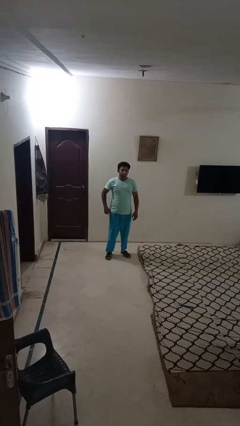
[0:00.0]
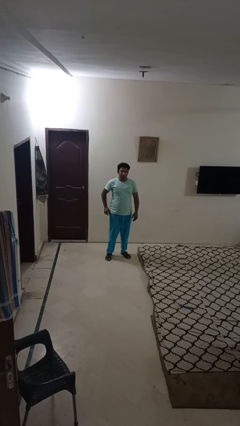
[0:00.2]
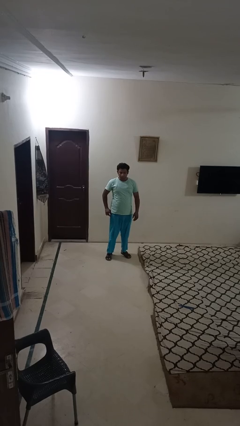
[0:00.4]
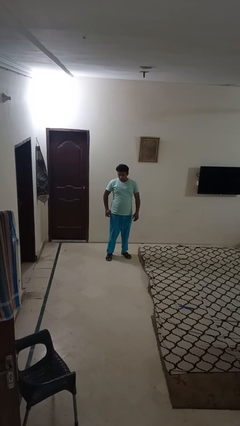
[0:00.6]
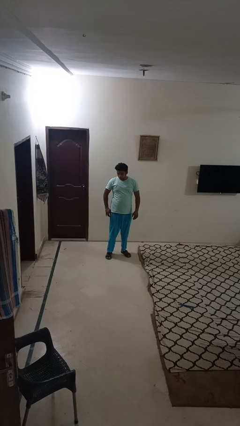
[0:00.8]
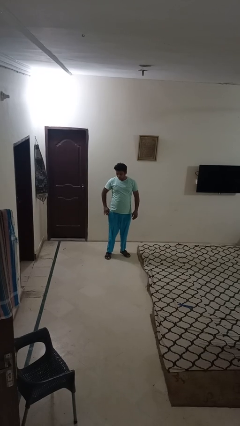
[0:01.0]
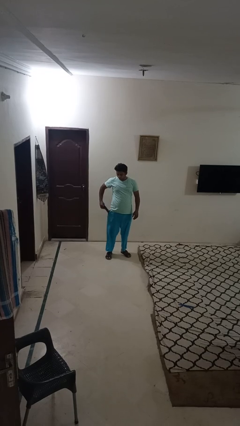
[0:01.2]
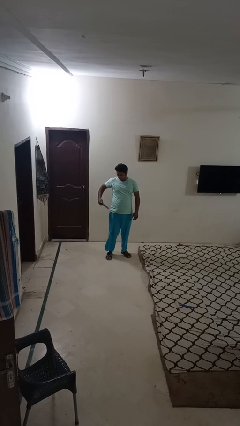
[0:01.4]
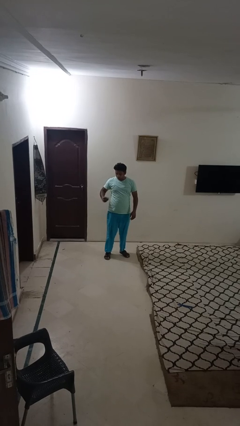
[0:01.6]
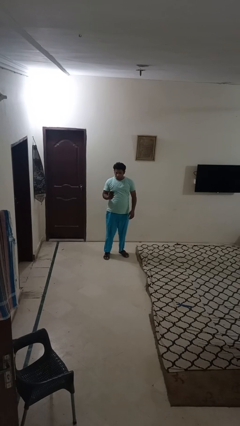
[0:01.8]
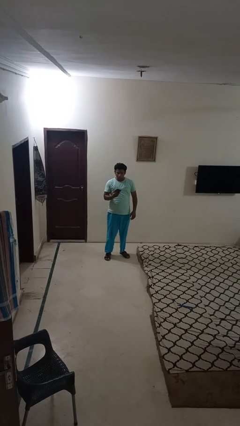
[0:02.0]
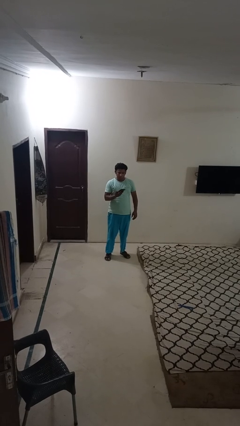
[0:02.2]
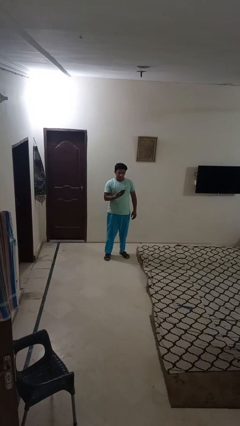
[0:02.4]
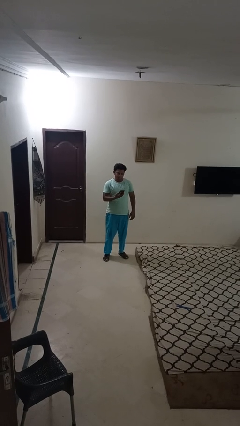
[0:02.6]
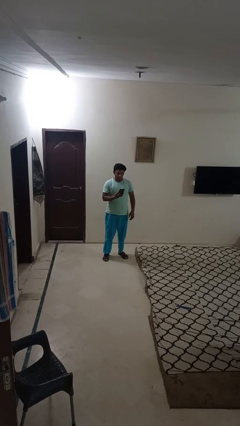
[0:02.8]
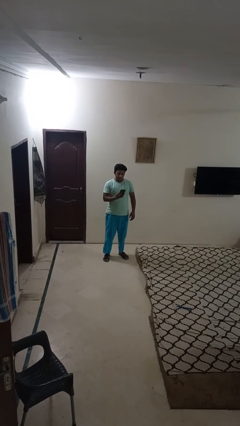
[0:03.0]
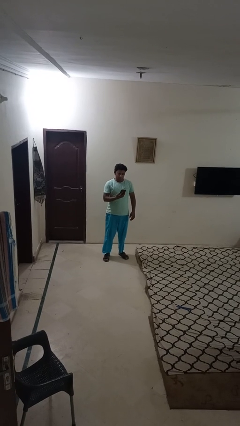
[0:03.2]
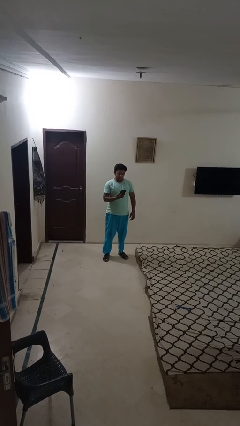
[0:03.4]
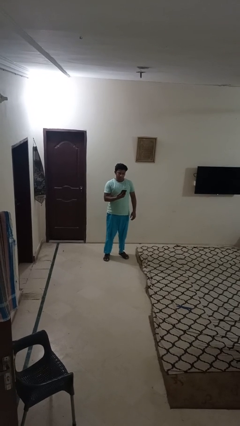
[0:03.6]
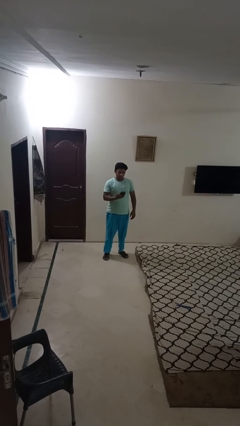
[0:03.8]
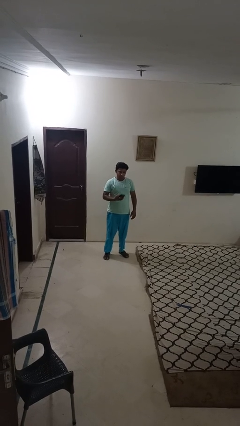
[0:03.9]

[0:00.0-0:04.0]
person takes phone from pocket

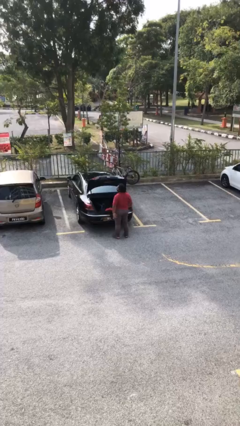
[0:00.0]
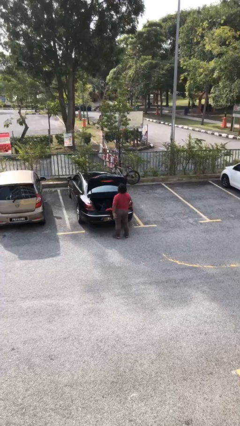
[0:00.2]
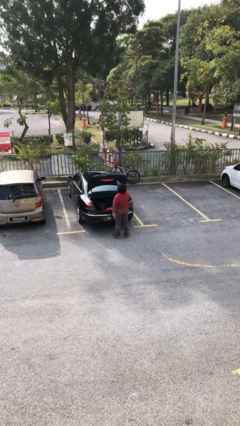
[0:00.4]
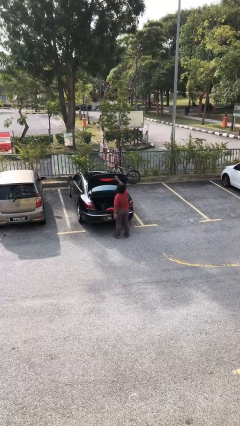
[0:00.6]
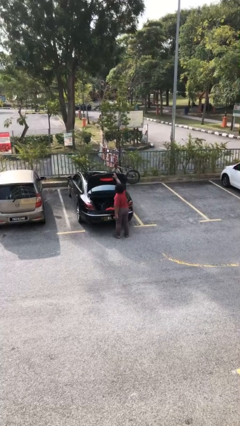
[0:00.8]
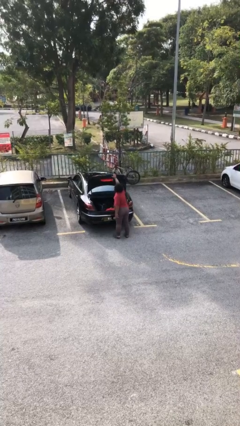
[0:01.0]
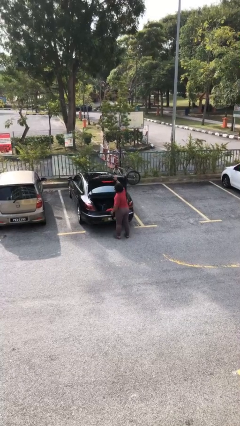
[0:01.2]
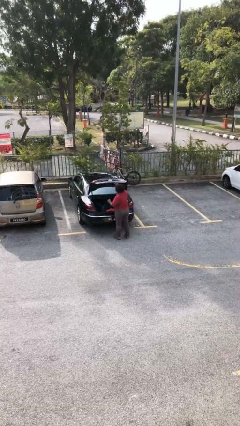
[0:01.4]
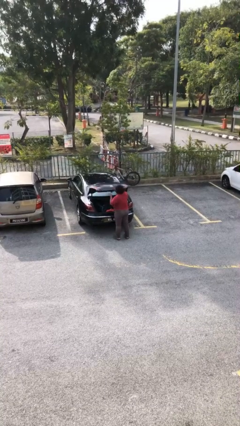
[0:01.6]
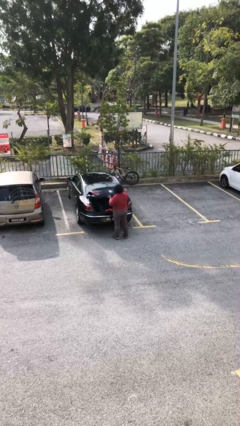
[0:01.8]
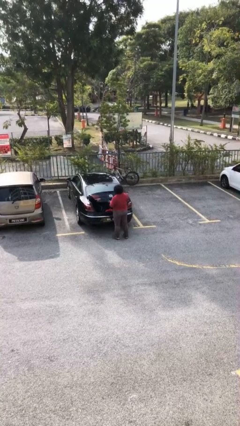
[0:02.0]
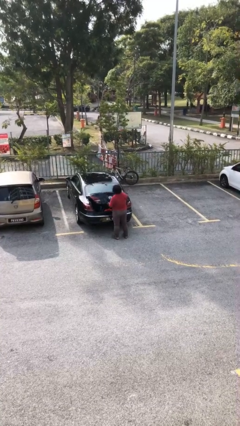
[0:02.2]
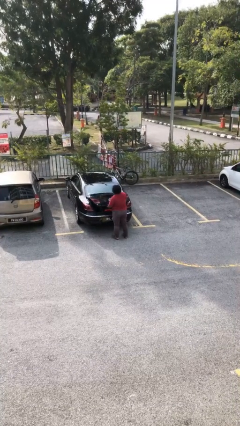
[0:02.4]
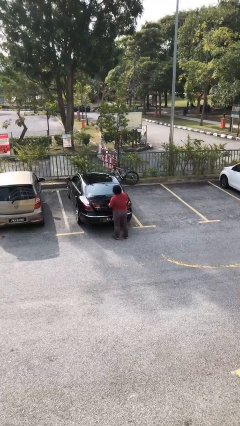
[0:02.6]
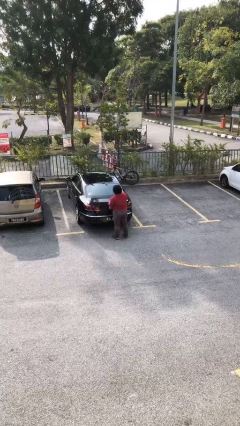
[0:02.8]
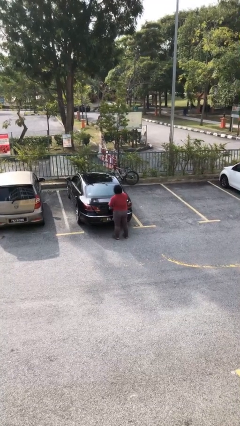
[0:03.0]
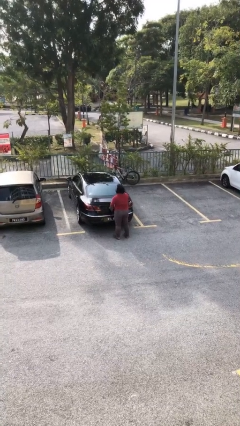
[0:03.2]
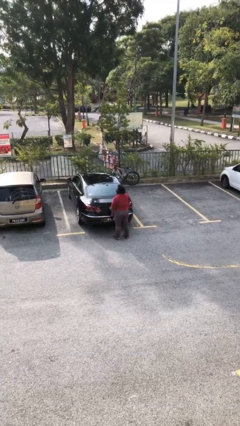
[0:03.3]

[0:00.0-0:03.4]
person closes car trunk

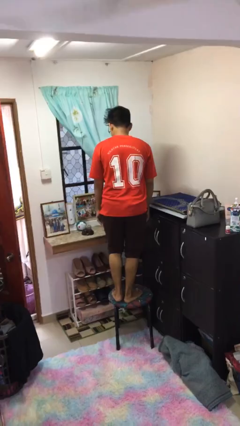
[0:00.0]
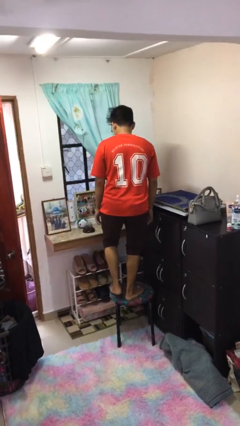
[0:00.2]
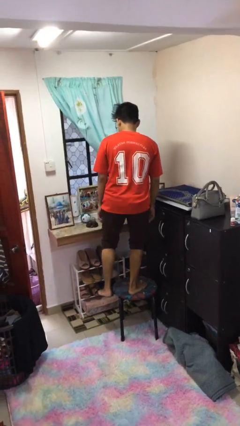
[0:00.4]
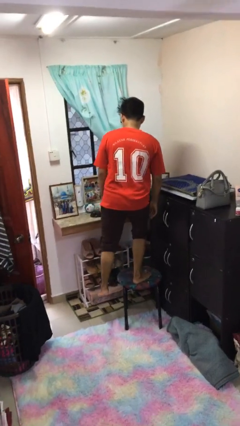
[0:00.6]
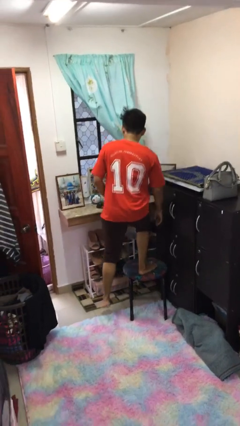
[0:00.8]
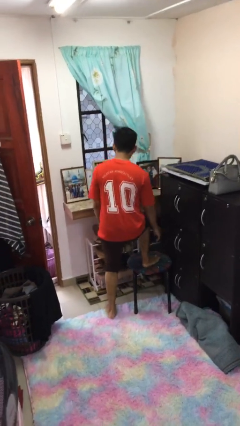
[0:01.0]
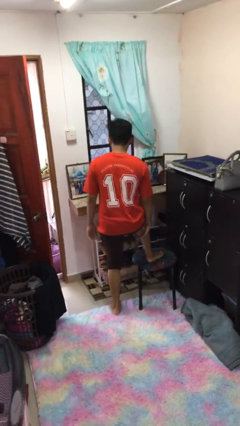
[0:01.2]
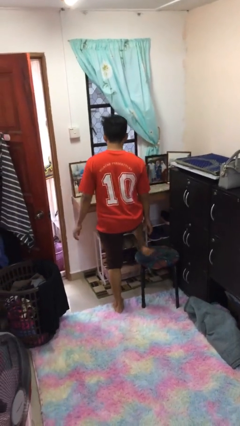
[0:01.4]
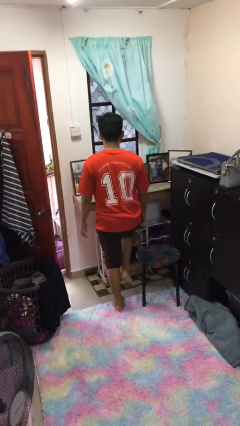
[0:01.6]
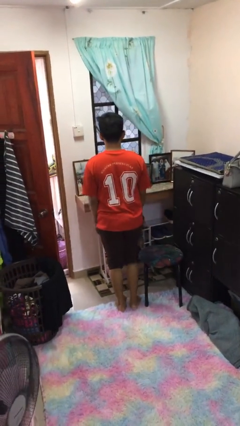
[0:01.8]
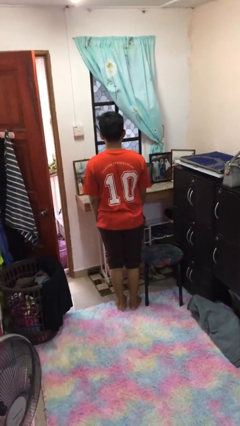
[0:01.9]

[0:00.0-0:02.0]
person climbs off chair

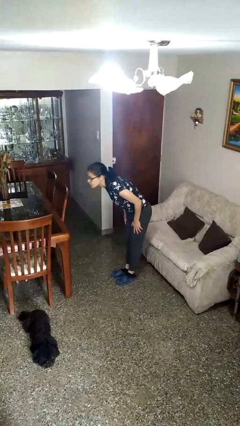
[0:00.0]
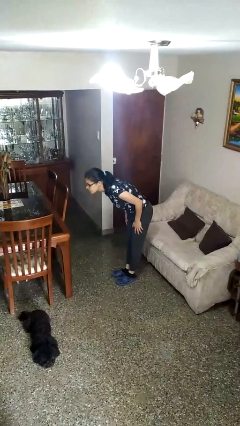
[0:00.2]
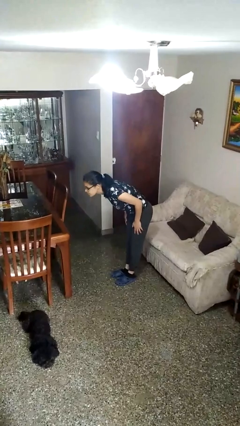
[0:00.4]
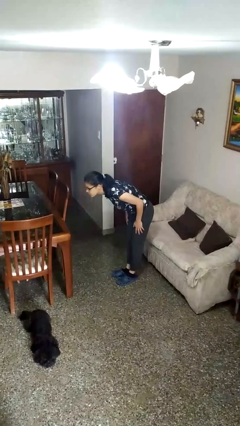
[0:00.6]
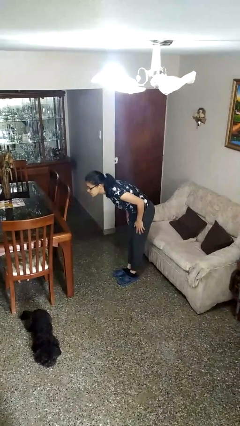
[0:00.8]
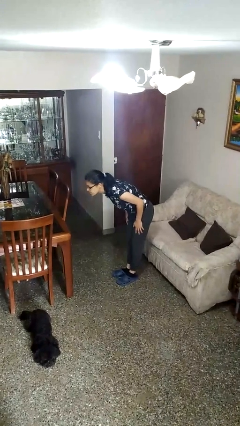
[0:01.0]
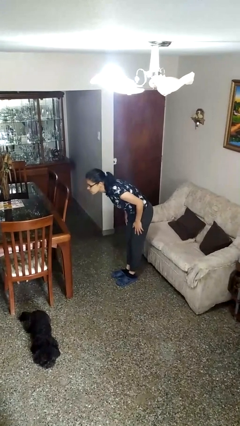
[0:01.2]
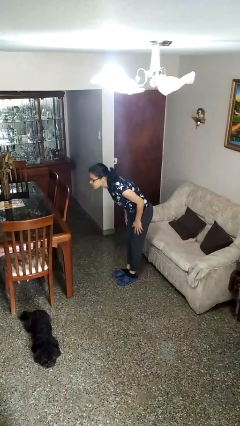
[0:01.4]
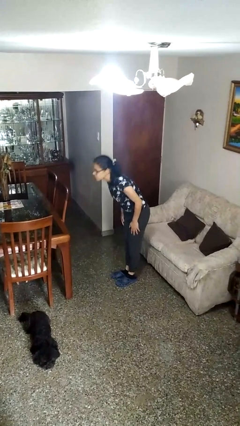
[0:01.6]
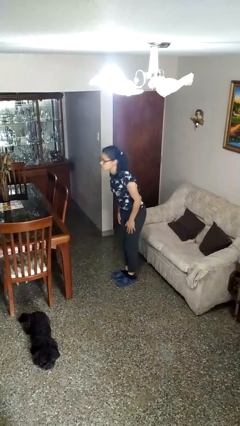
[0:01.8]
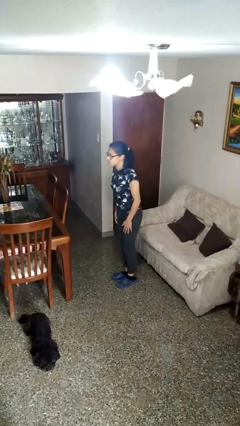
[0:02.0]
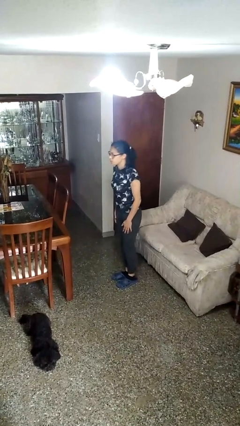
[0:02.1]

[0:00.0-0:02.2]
person bows

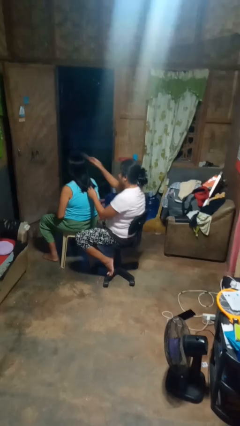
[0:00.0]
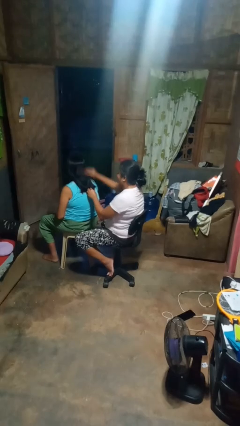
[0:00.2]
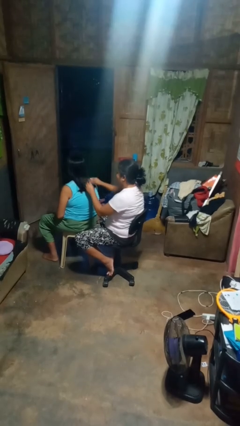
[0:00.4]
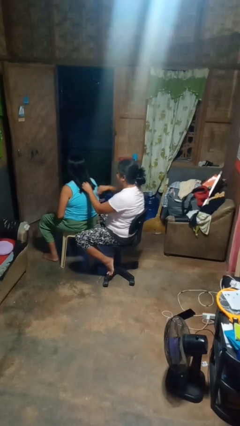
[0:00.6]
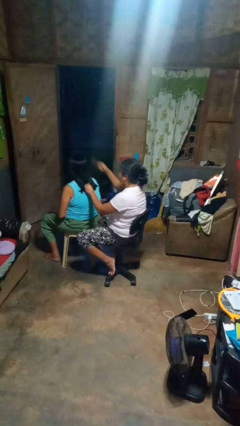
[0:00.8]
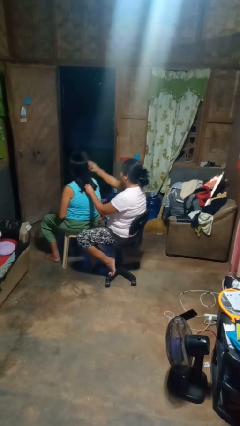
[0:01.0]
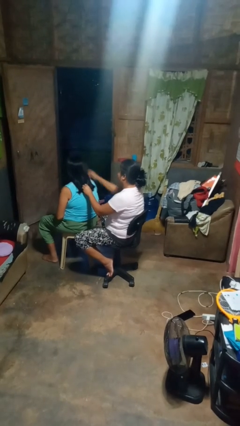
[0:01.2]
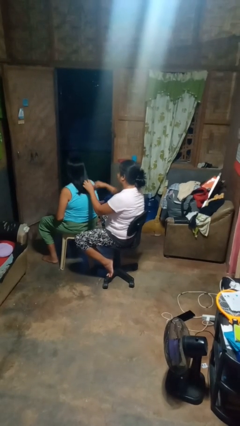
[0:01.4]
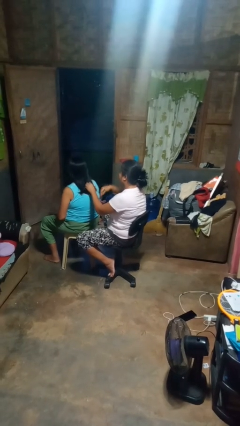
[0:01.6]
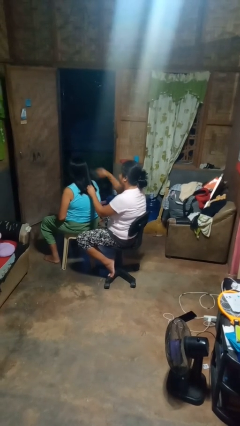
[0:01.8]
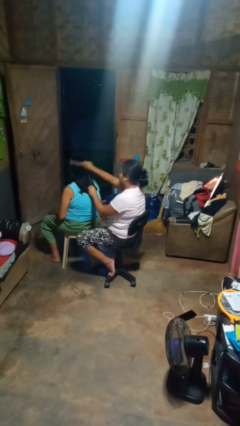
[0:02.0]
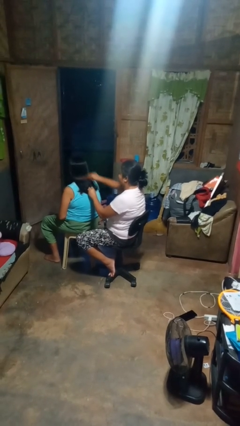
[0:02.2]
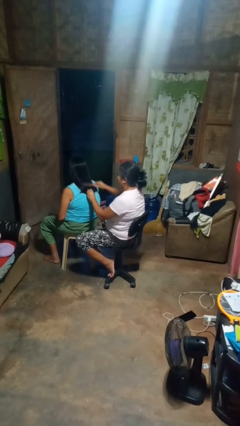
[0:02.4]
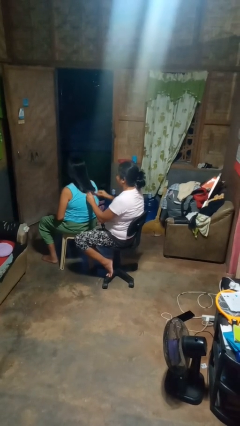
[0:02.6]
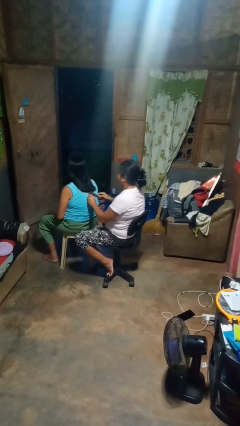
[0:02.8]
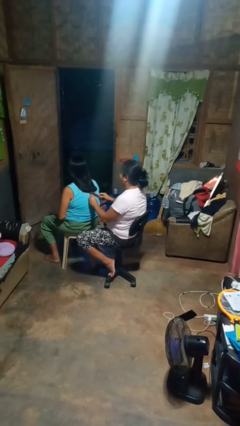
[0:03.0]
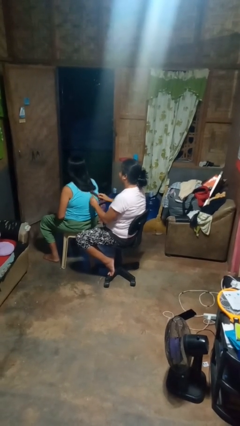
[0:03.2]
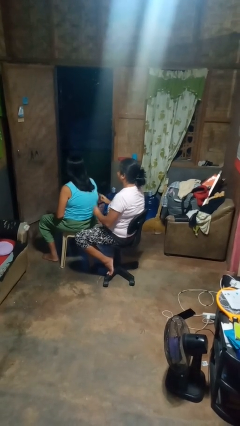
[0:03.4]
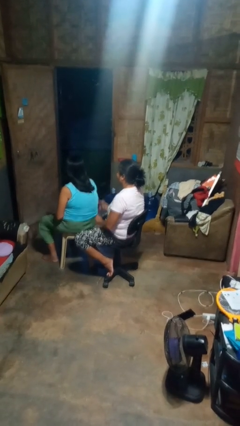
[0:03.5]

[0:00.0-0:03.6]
person brushes hair of person

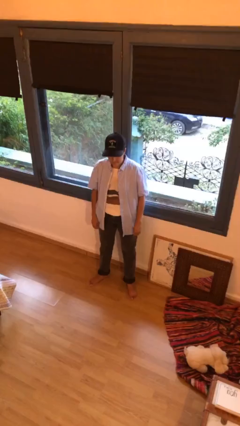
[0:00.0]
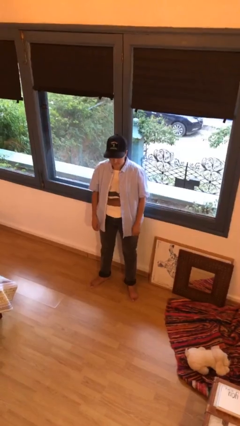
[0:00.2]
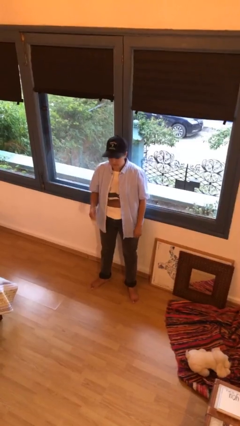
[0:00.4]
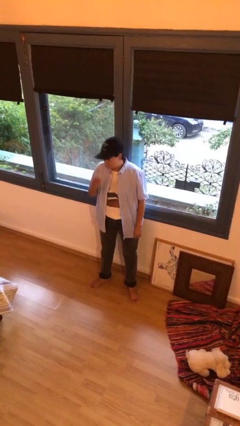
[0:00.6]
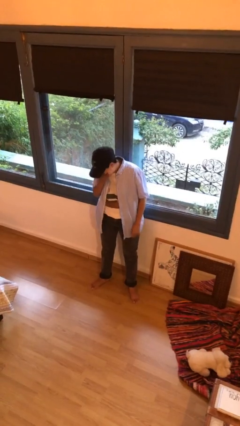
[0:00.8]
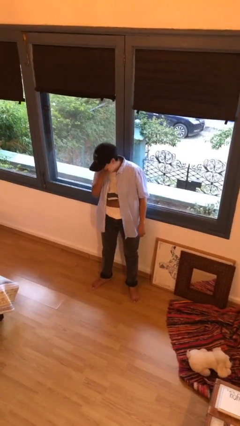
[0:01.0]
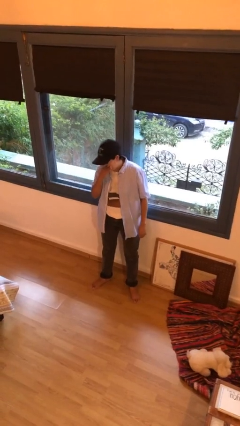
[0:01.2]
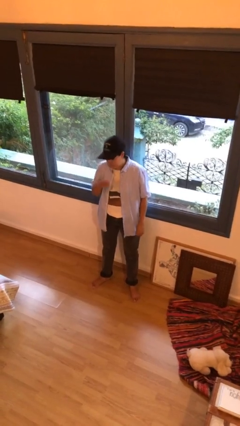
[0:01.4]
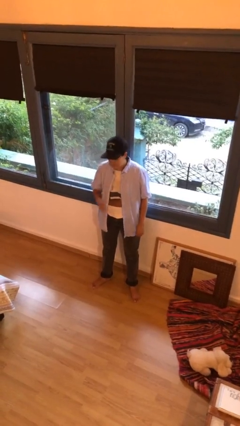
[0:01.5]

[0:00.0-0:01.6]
person sneezes into hand

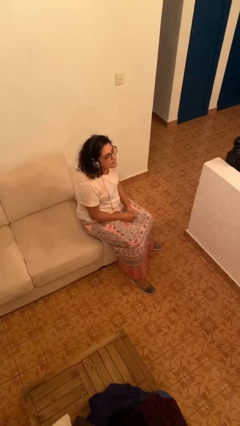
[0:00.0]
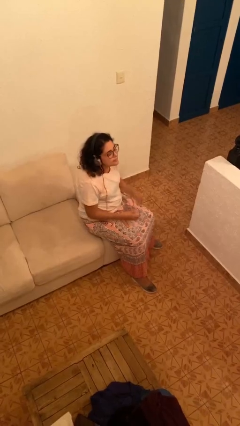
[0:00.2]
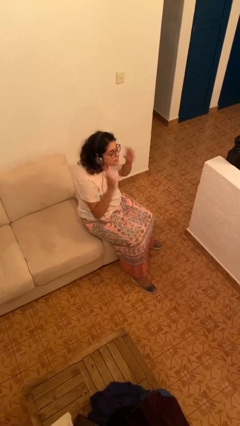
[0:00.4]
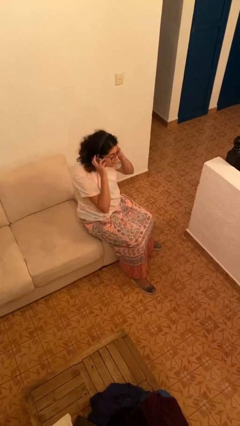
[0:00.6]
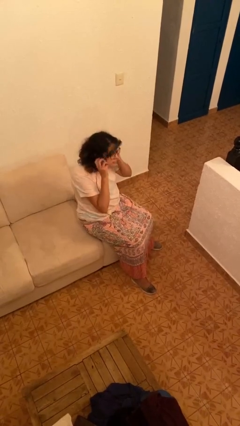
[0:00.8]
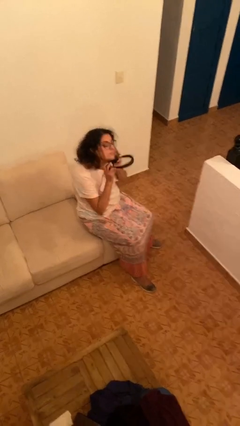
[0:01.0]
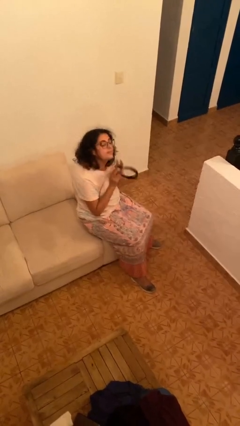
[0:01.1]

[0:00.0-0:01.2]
person takes off headphones
